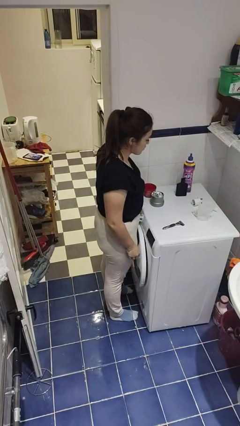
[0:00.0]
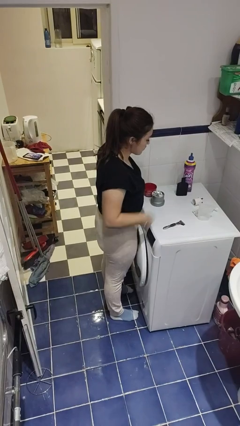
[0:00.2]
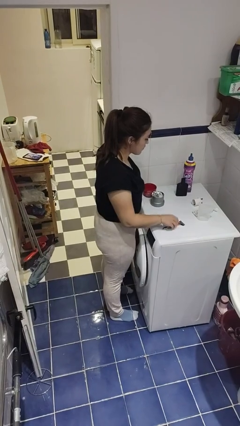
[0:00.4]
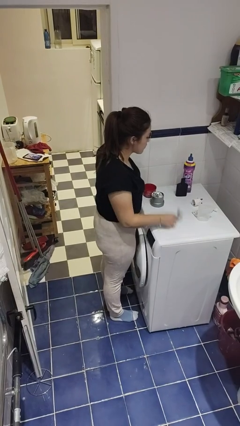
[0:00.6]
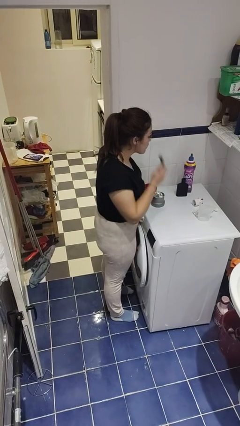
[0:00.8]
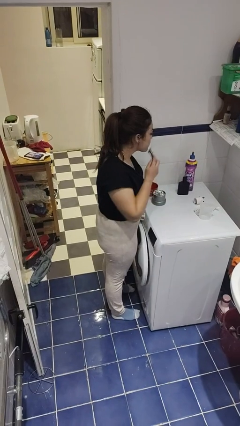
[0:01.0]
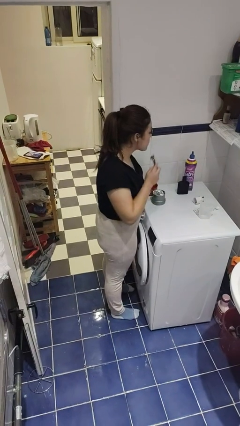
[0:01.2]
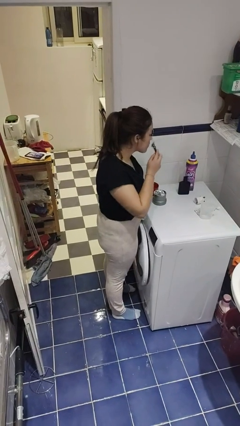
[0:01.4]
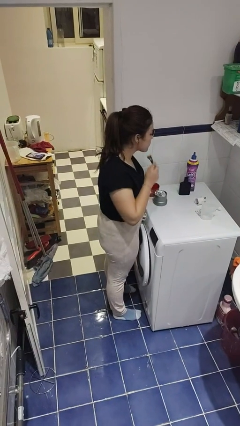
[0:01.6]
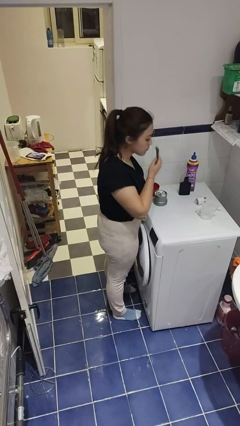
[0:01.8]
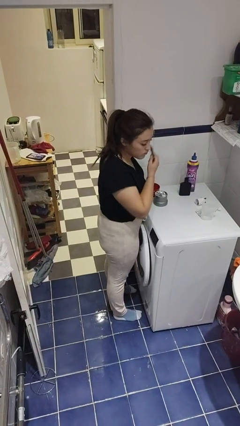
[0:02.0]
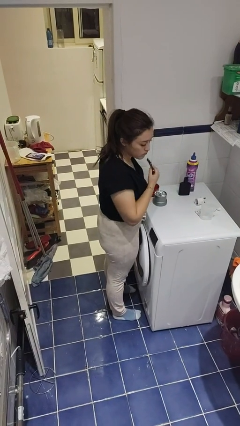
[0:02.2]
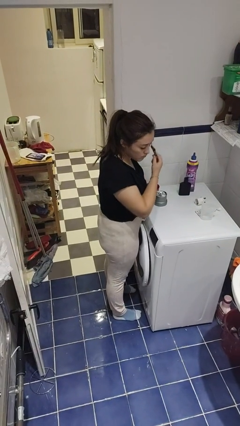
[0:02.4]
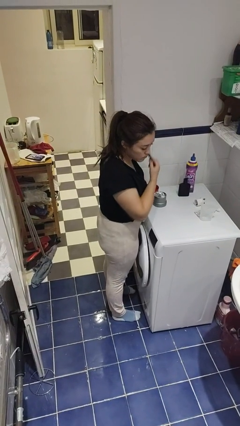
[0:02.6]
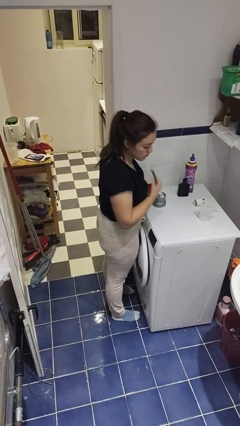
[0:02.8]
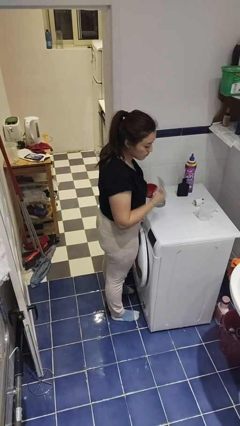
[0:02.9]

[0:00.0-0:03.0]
person shaves face

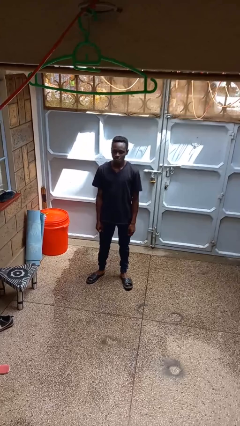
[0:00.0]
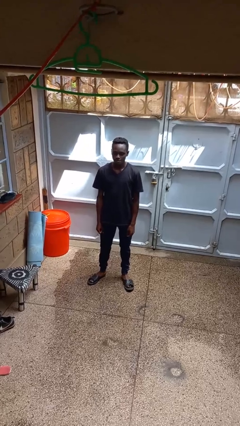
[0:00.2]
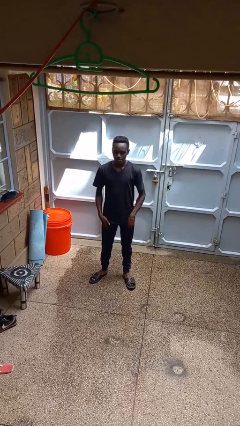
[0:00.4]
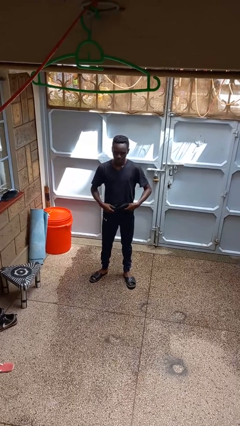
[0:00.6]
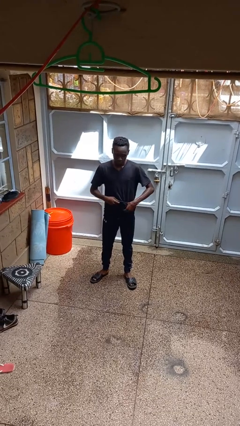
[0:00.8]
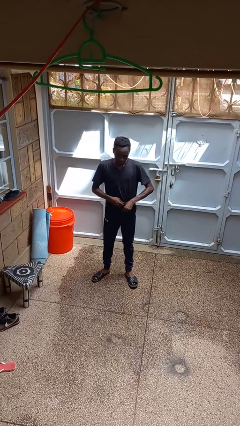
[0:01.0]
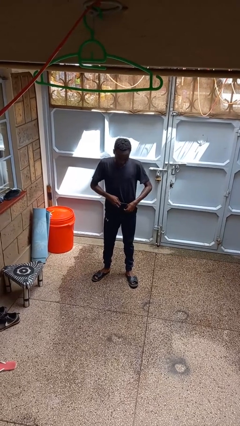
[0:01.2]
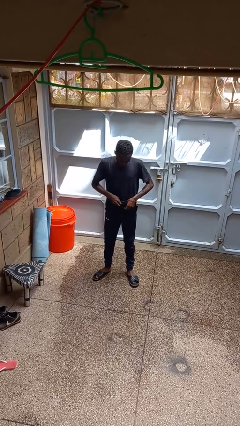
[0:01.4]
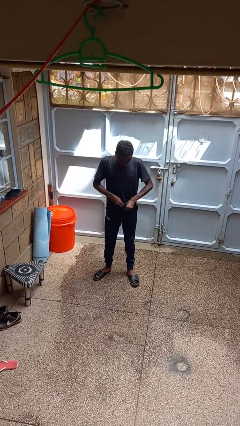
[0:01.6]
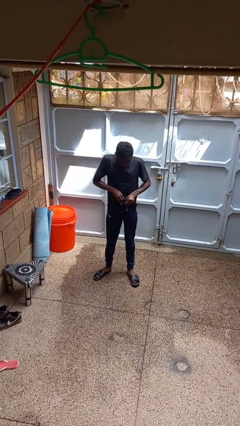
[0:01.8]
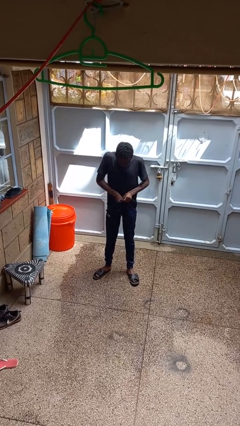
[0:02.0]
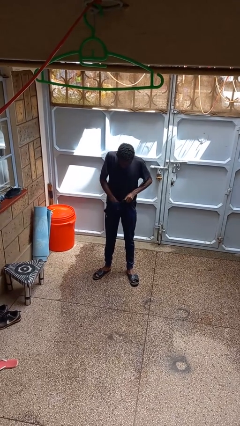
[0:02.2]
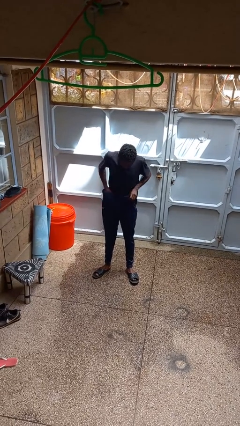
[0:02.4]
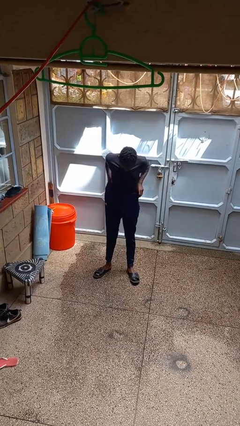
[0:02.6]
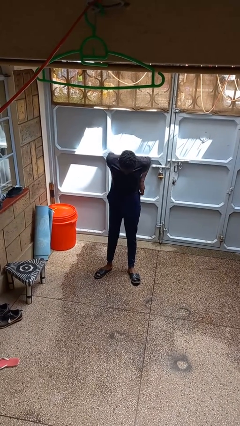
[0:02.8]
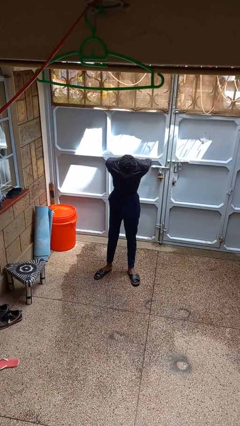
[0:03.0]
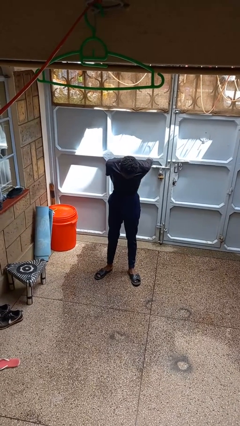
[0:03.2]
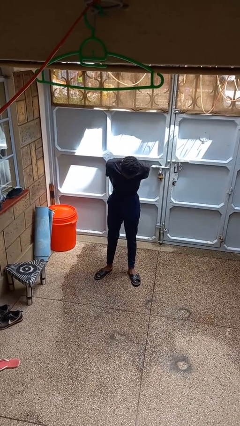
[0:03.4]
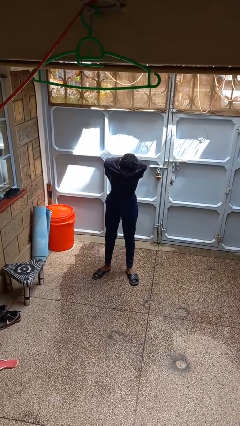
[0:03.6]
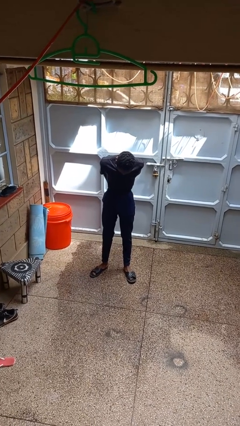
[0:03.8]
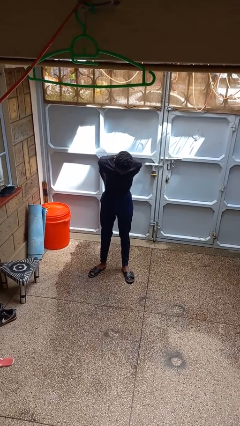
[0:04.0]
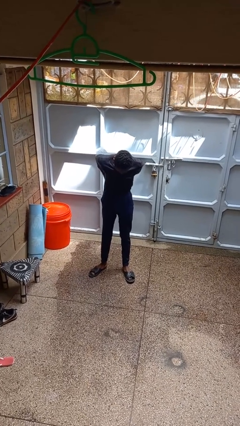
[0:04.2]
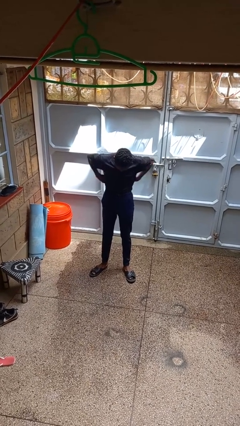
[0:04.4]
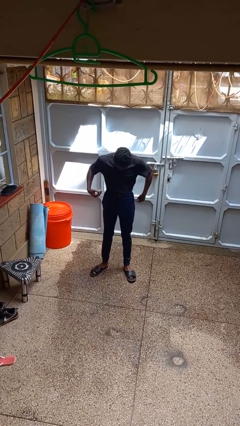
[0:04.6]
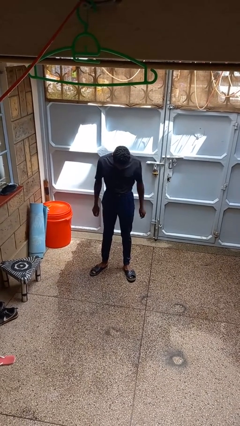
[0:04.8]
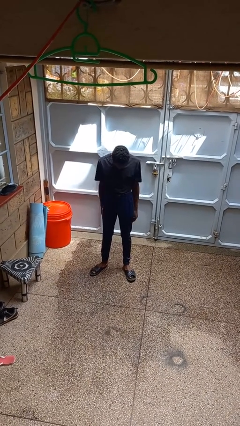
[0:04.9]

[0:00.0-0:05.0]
person tucks in shirt

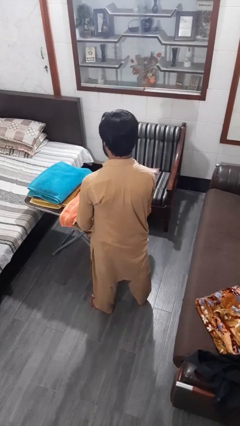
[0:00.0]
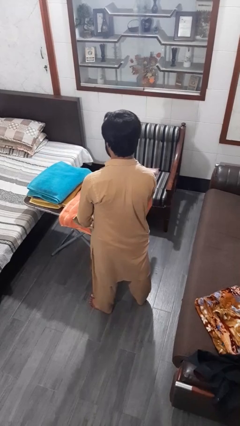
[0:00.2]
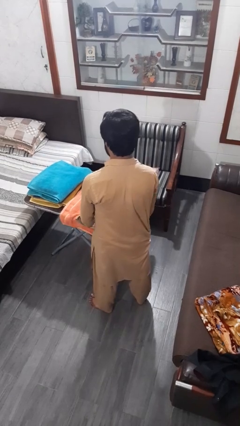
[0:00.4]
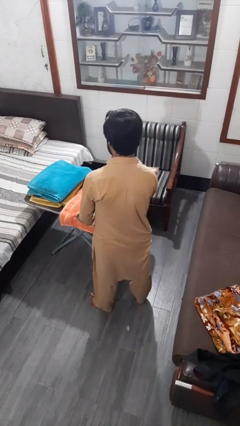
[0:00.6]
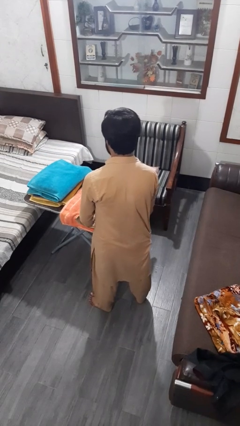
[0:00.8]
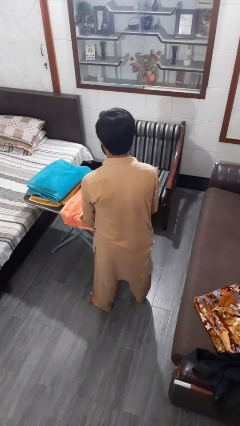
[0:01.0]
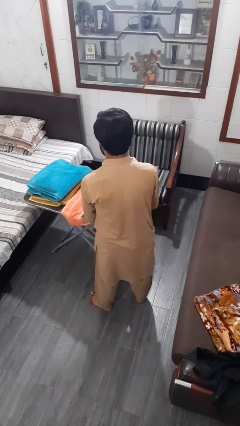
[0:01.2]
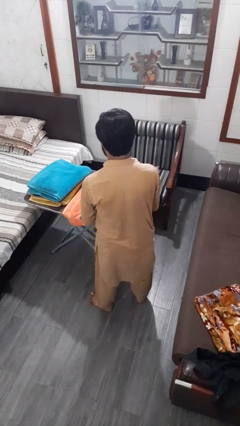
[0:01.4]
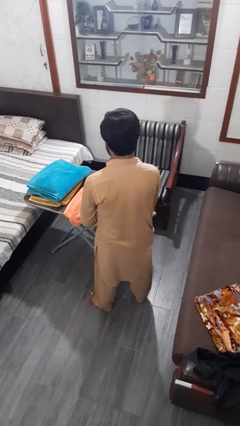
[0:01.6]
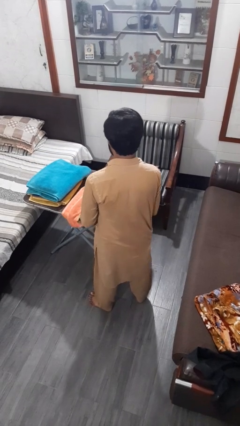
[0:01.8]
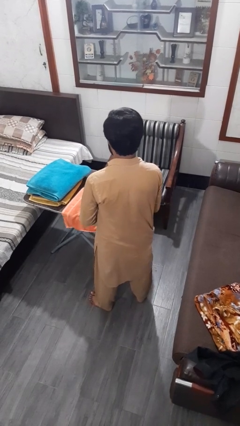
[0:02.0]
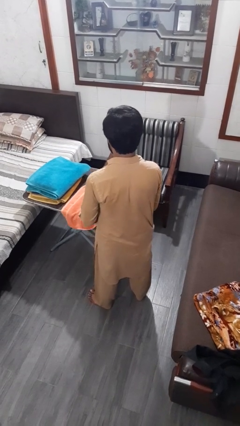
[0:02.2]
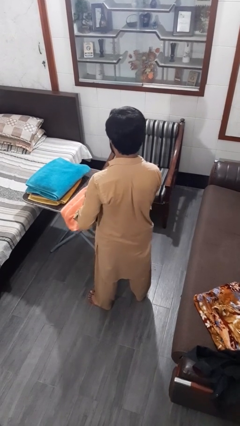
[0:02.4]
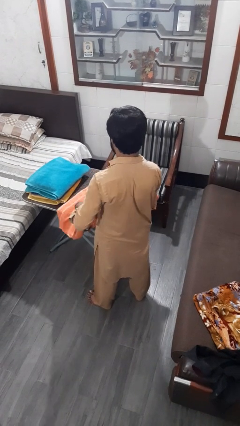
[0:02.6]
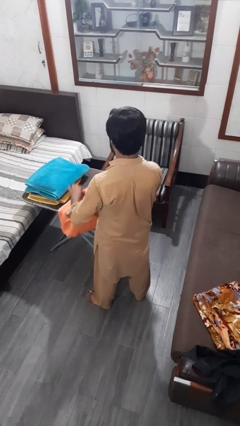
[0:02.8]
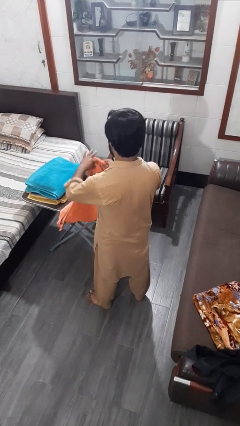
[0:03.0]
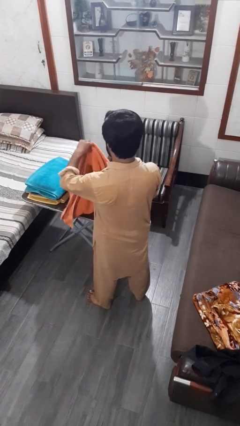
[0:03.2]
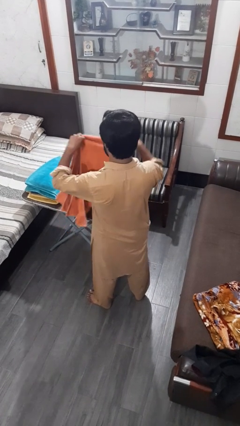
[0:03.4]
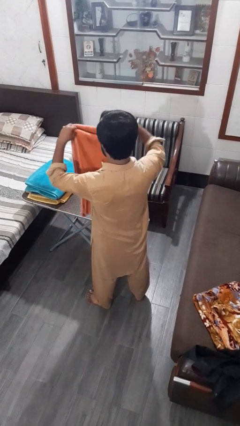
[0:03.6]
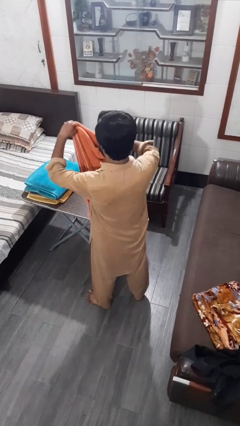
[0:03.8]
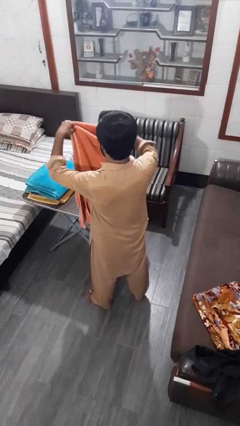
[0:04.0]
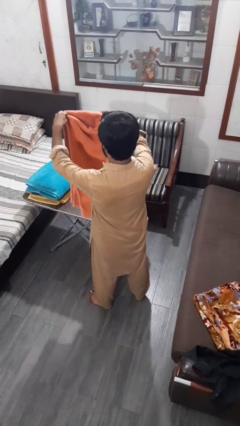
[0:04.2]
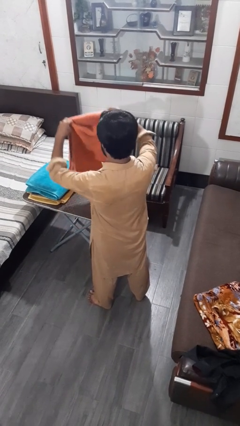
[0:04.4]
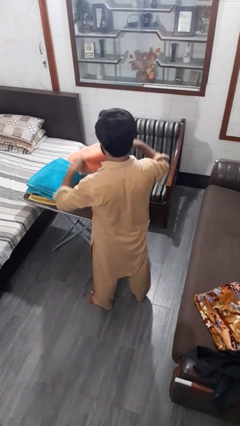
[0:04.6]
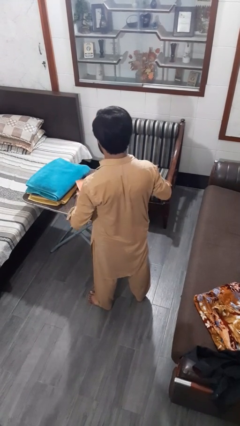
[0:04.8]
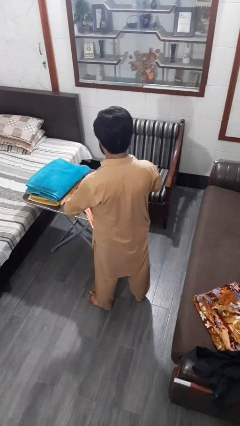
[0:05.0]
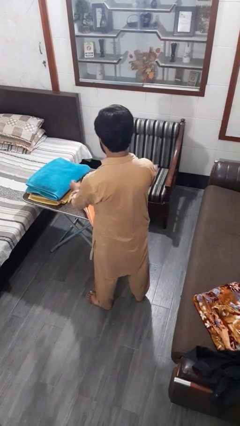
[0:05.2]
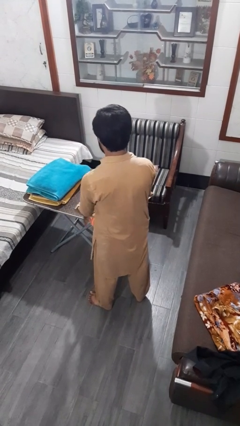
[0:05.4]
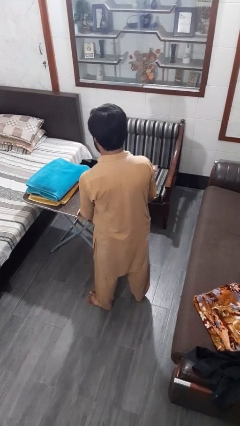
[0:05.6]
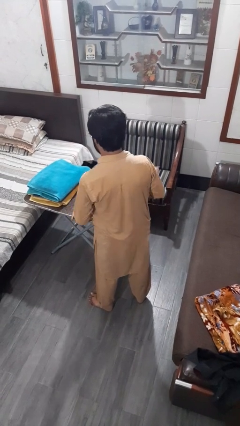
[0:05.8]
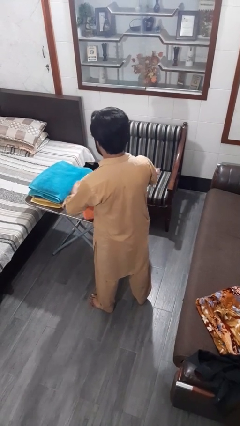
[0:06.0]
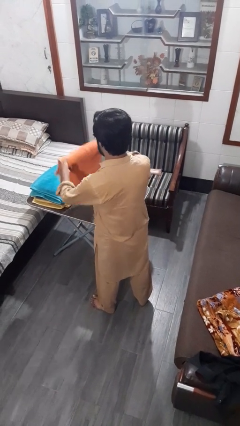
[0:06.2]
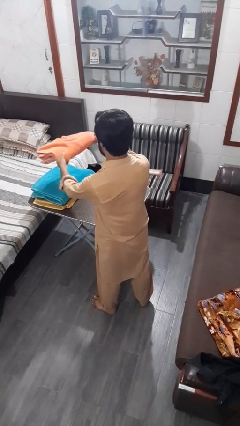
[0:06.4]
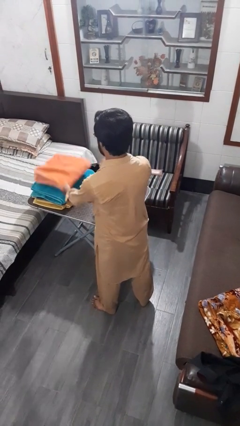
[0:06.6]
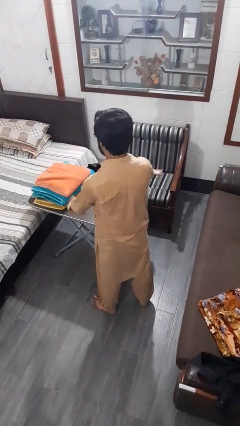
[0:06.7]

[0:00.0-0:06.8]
person folds towel

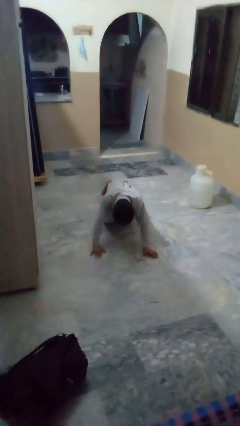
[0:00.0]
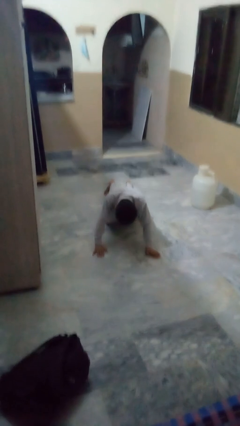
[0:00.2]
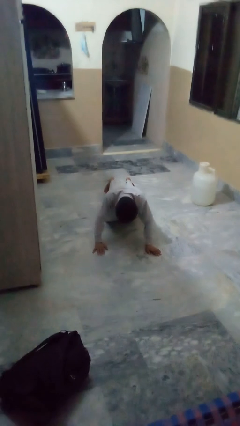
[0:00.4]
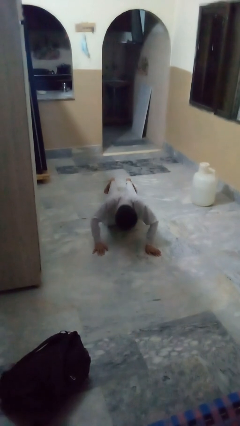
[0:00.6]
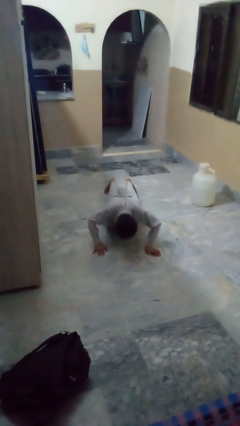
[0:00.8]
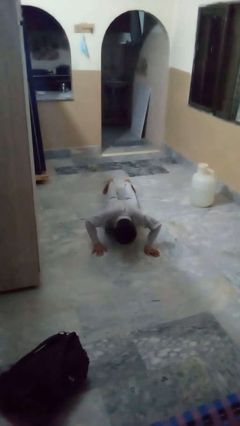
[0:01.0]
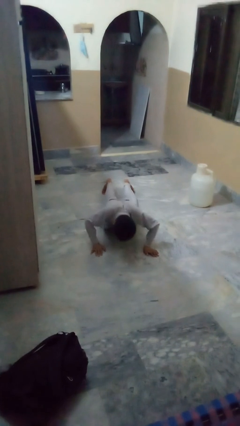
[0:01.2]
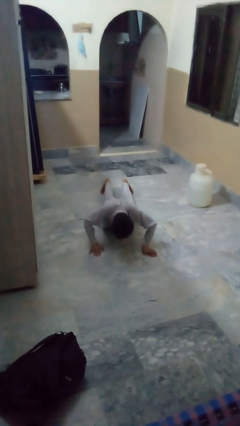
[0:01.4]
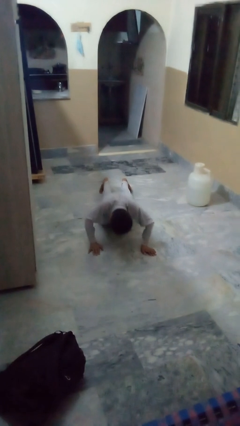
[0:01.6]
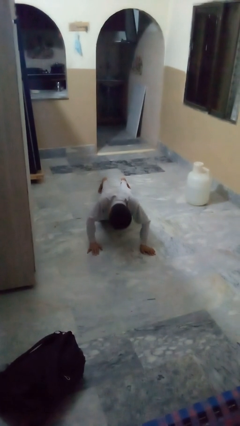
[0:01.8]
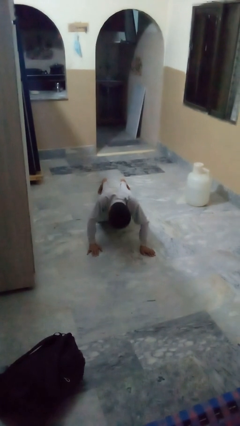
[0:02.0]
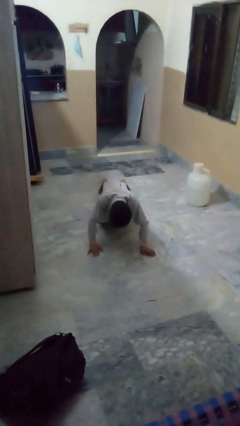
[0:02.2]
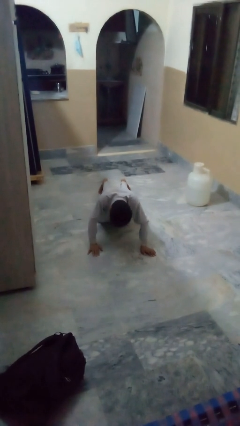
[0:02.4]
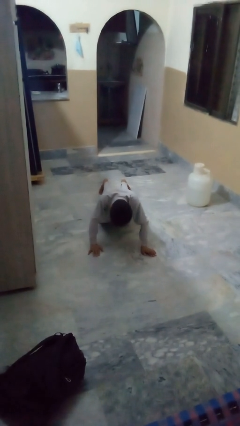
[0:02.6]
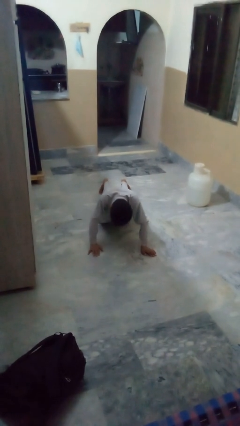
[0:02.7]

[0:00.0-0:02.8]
person exercises with pushup
